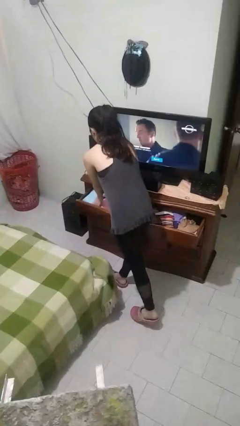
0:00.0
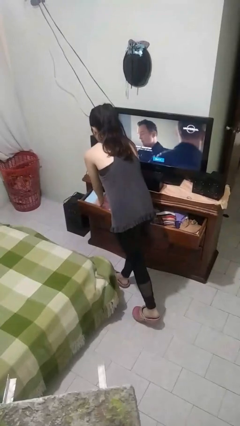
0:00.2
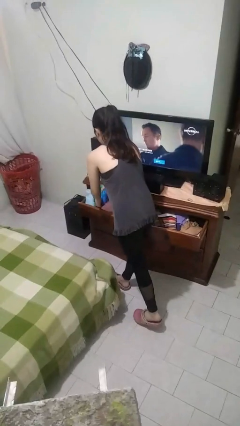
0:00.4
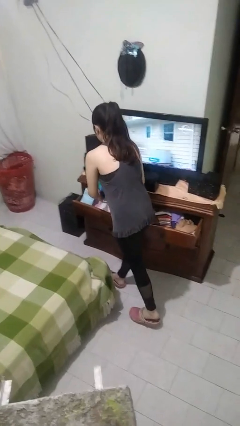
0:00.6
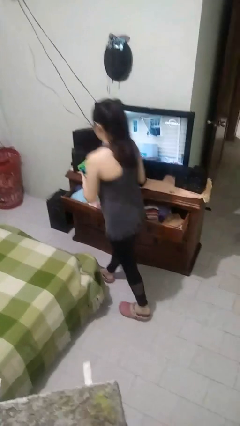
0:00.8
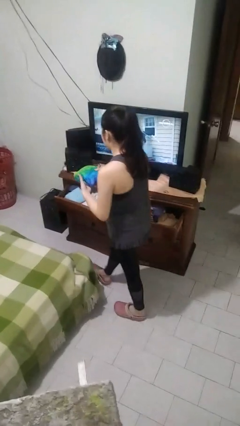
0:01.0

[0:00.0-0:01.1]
person takes clothes from dresser

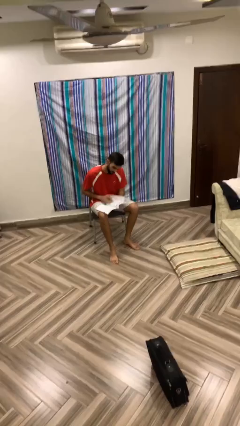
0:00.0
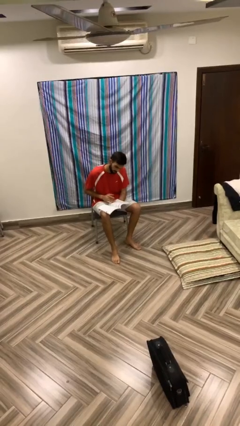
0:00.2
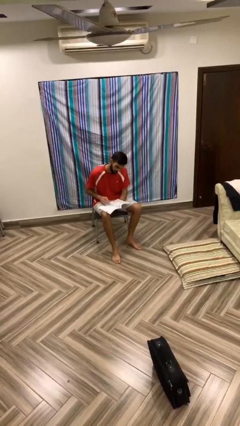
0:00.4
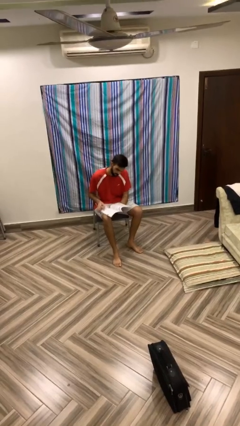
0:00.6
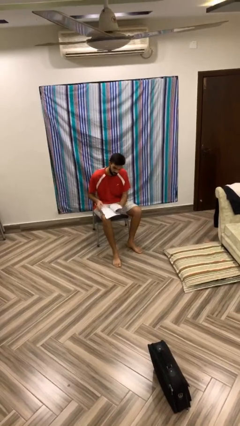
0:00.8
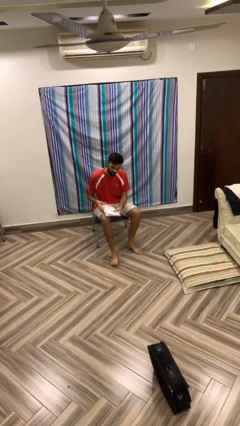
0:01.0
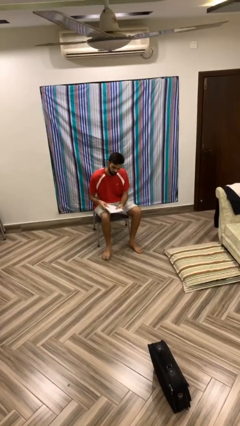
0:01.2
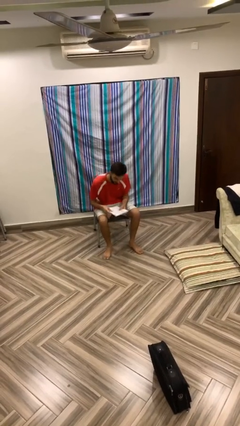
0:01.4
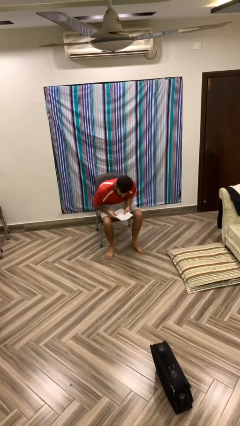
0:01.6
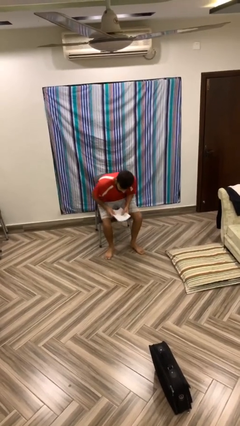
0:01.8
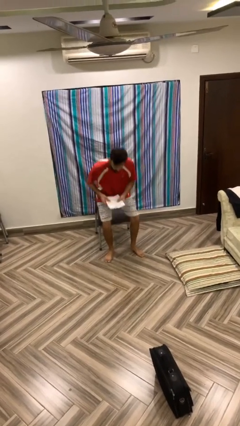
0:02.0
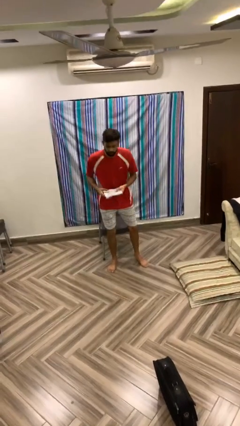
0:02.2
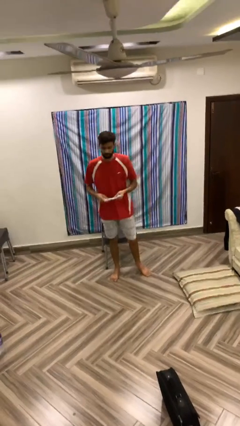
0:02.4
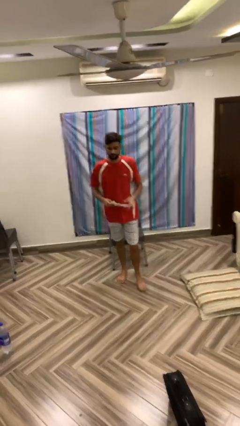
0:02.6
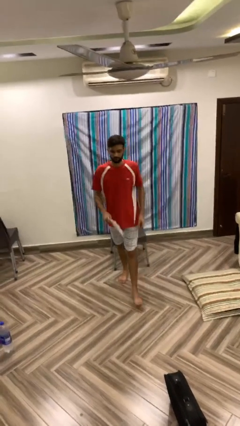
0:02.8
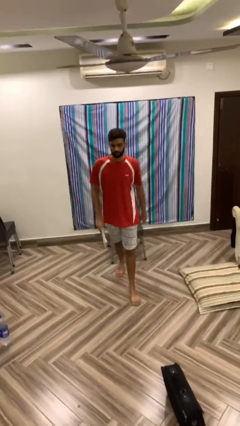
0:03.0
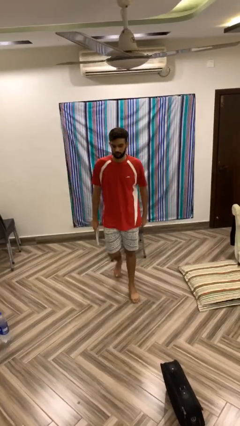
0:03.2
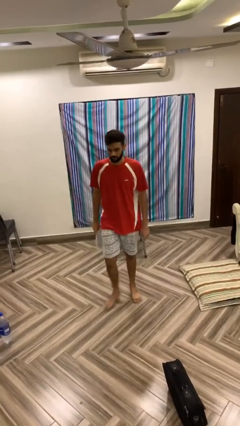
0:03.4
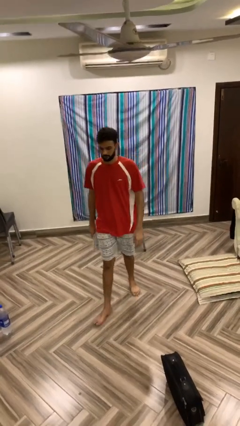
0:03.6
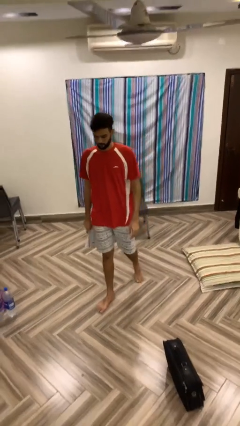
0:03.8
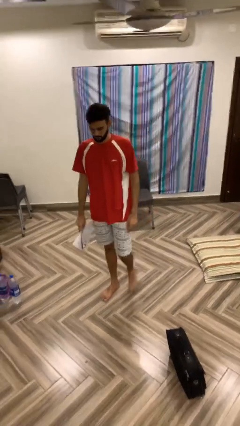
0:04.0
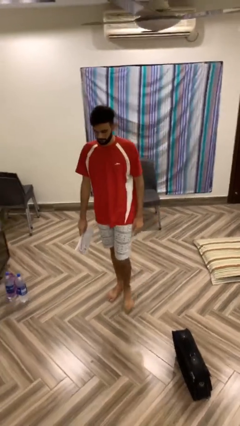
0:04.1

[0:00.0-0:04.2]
person stands up

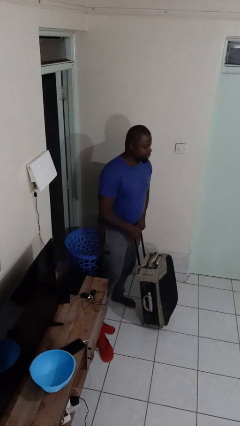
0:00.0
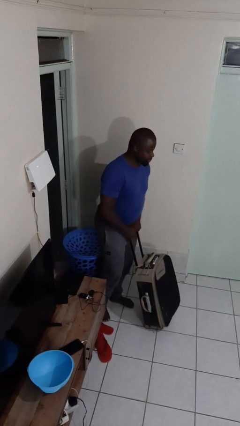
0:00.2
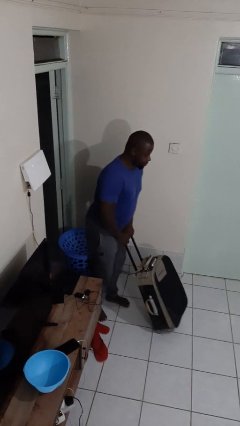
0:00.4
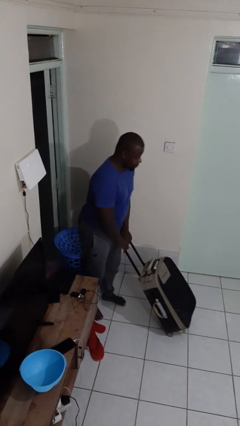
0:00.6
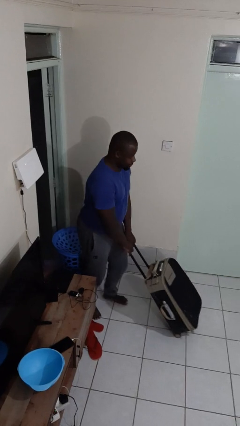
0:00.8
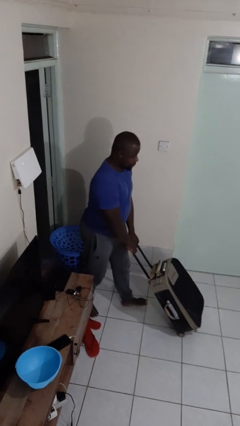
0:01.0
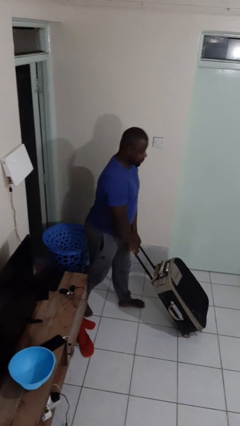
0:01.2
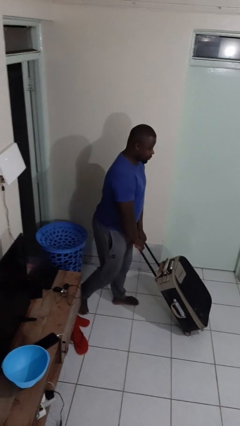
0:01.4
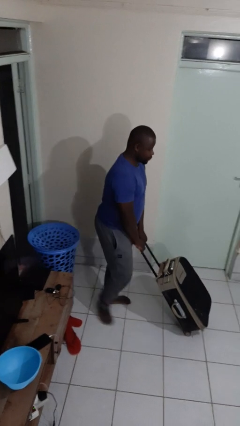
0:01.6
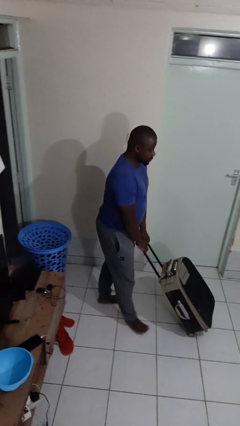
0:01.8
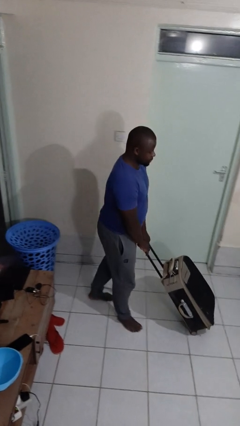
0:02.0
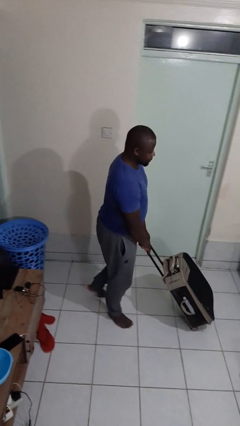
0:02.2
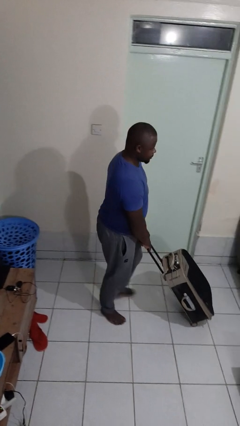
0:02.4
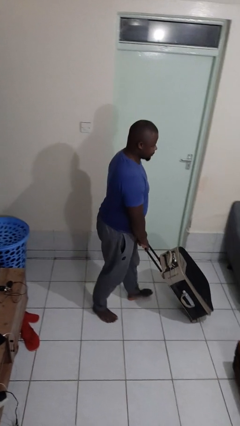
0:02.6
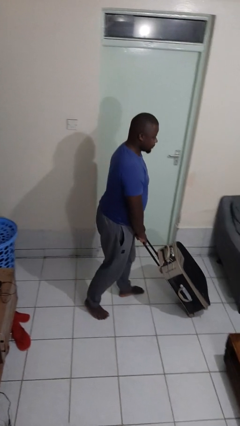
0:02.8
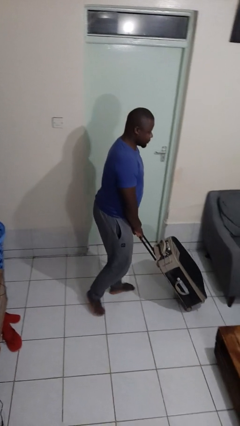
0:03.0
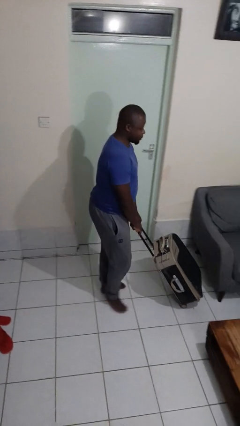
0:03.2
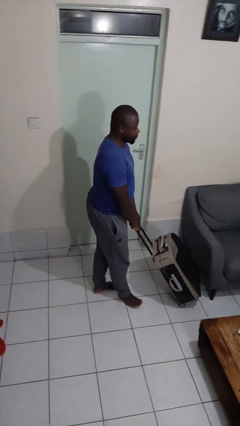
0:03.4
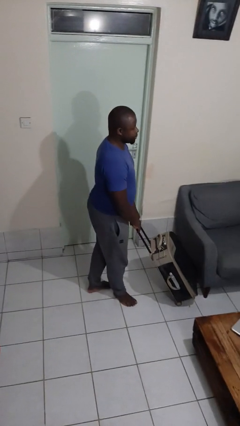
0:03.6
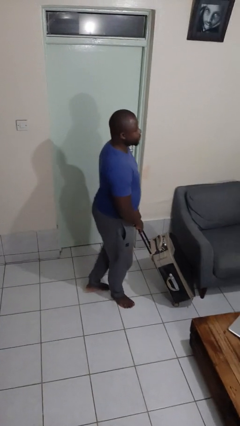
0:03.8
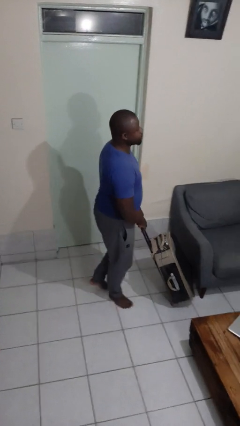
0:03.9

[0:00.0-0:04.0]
person pushes wheeled cart

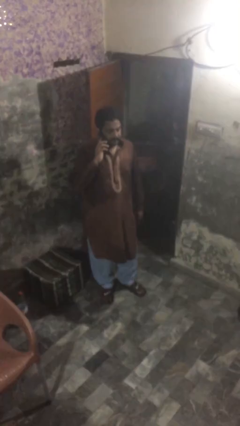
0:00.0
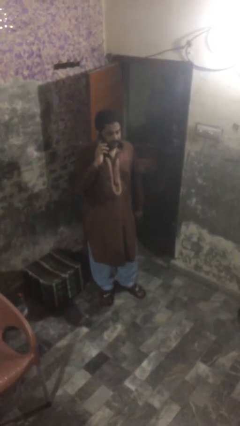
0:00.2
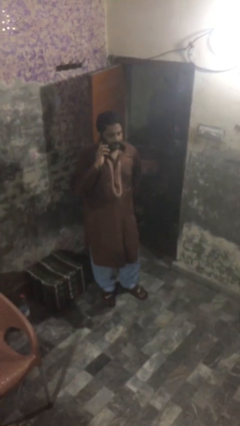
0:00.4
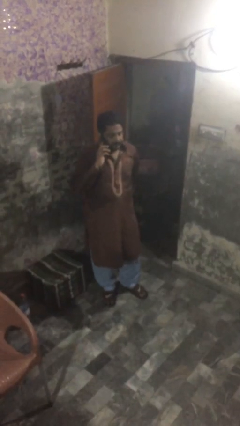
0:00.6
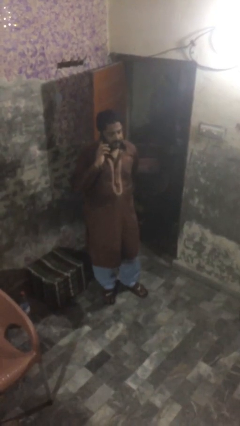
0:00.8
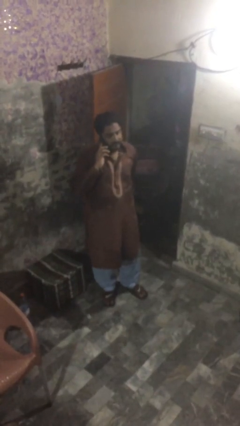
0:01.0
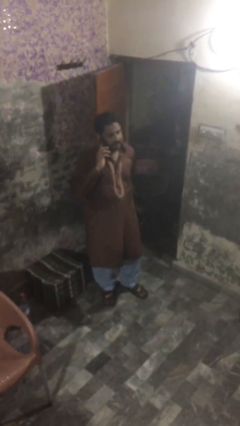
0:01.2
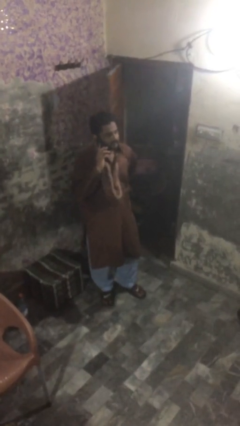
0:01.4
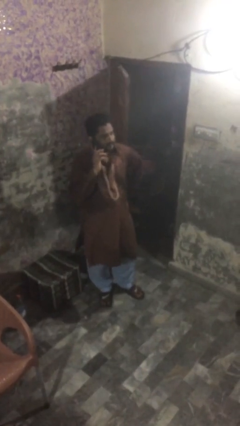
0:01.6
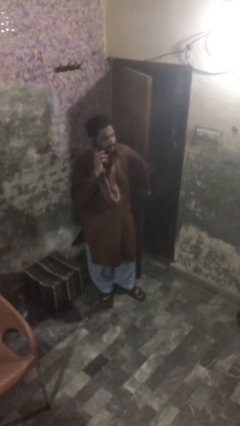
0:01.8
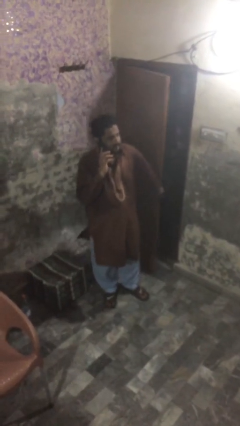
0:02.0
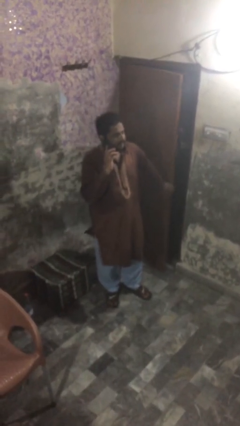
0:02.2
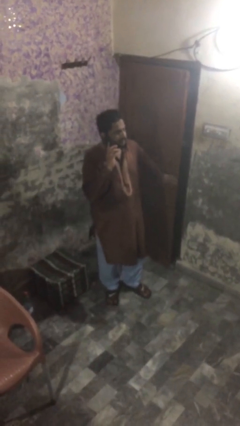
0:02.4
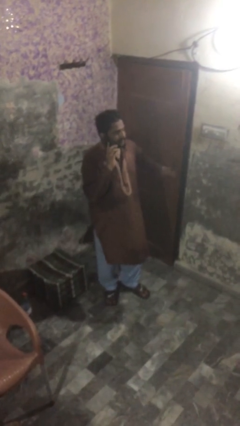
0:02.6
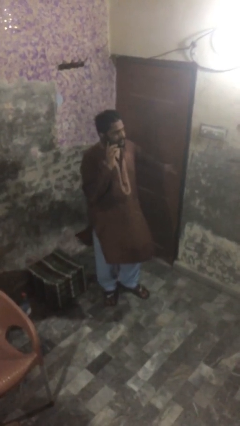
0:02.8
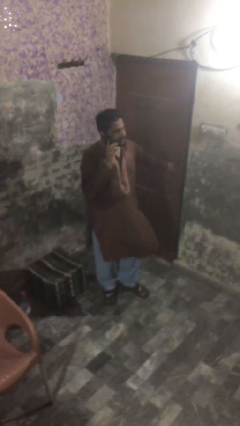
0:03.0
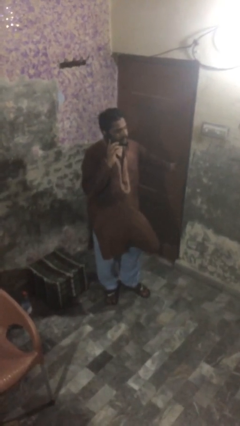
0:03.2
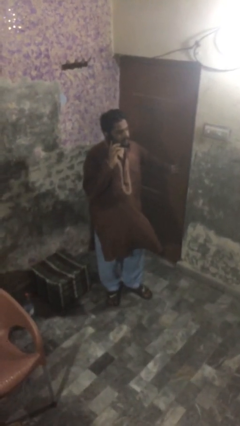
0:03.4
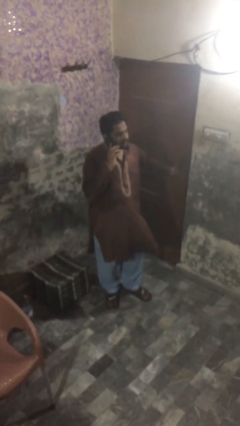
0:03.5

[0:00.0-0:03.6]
person closes facility door

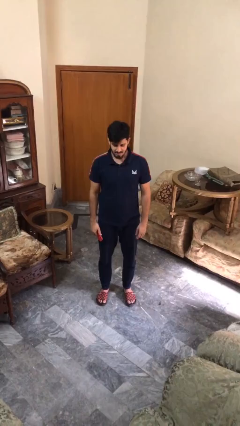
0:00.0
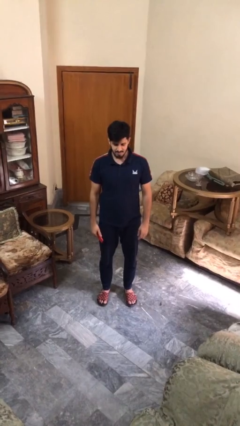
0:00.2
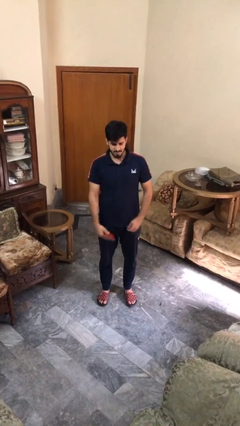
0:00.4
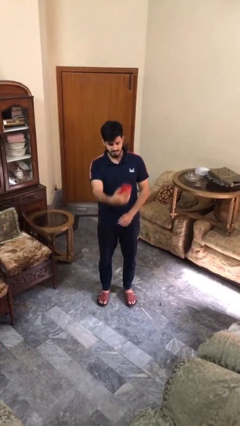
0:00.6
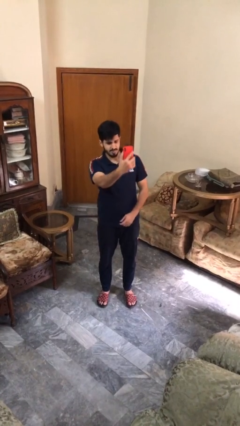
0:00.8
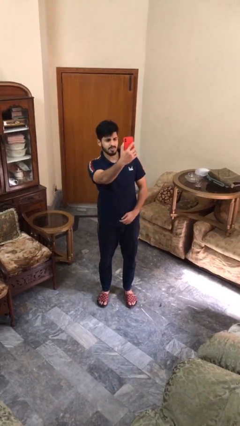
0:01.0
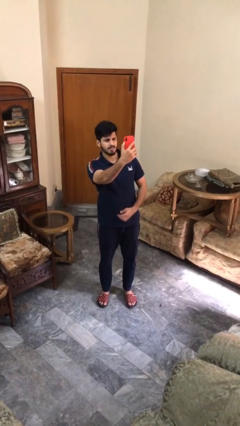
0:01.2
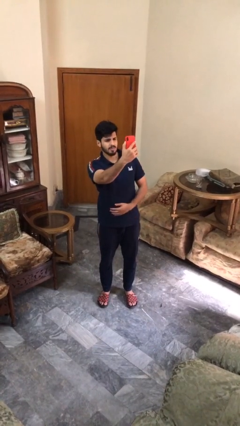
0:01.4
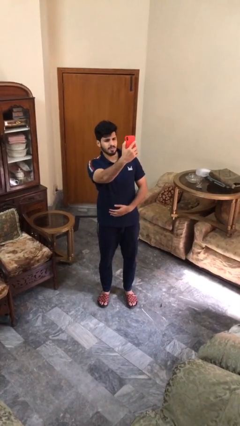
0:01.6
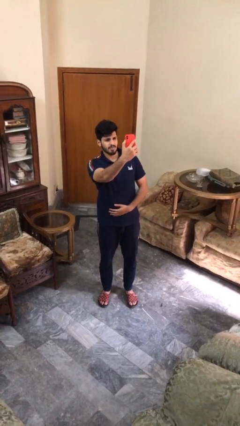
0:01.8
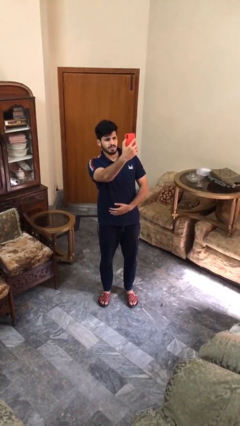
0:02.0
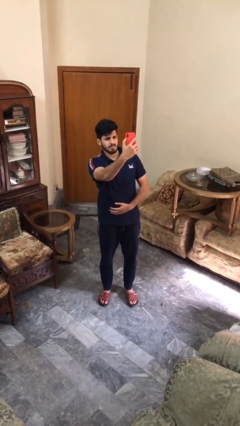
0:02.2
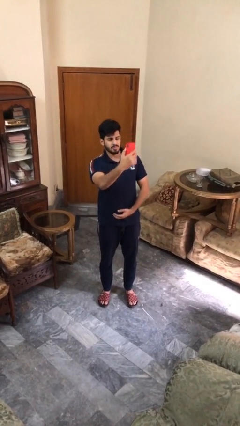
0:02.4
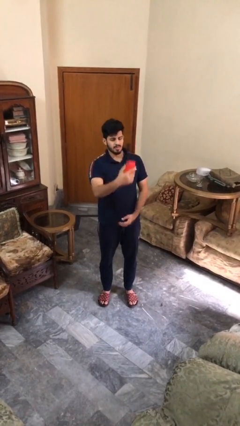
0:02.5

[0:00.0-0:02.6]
person takes selfie

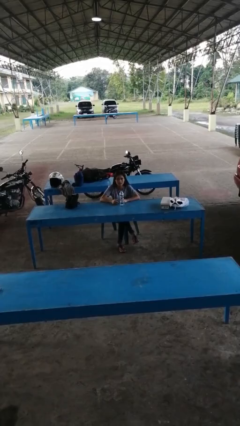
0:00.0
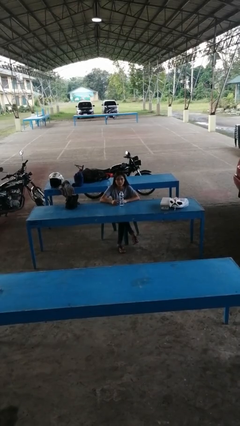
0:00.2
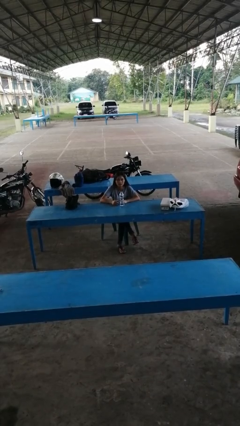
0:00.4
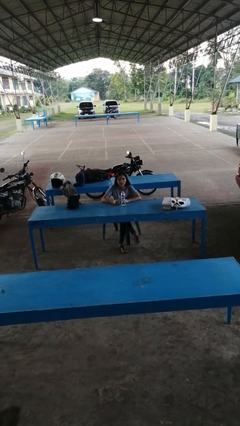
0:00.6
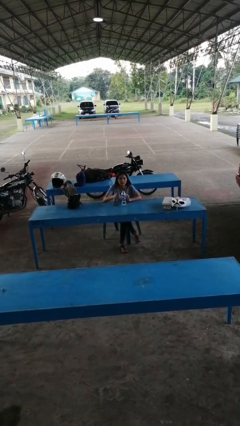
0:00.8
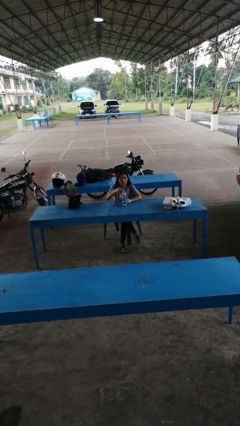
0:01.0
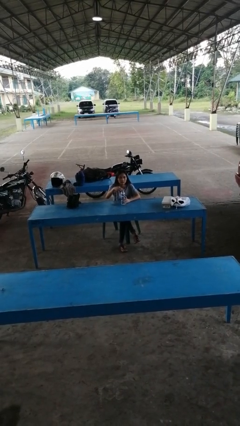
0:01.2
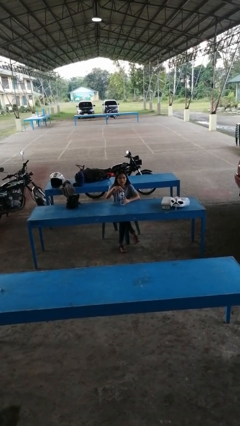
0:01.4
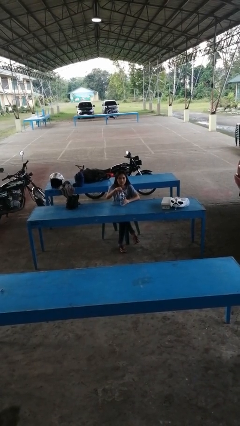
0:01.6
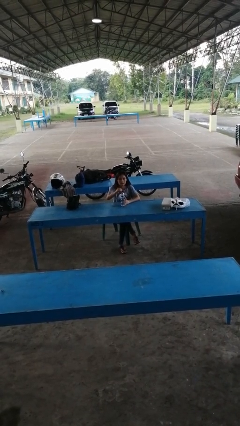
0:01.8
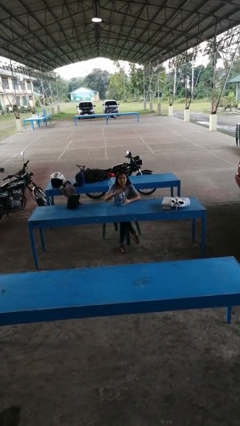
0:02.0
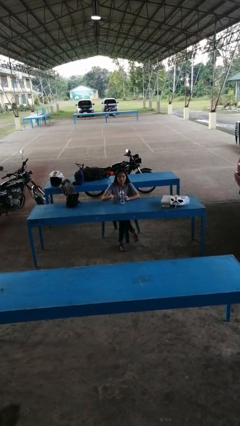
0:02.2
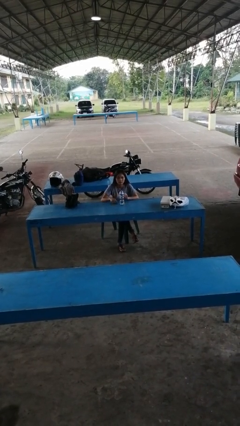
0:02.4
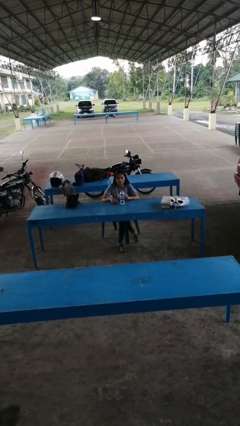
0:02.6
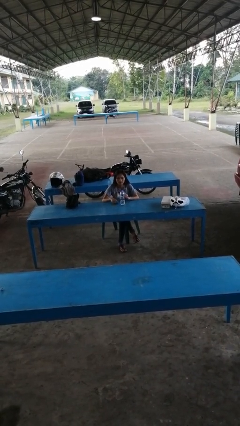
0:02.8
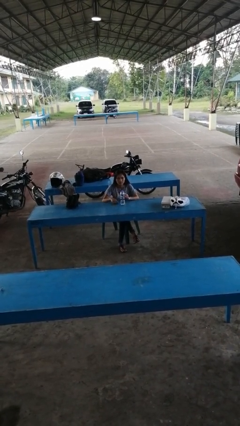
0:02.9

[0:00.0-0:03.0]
person screws lid to bottle
